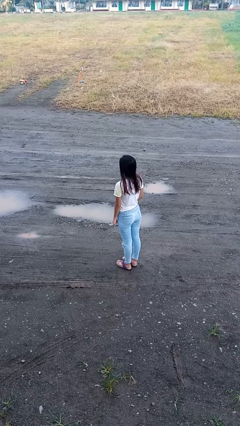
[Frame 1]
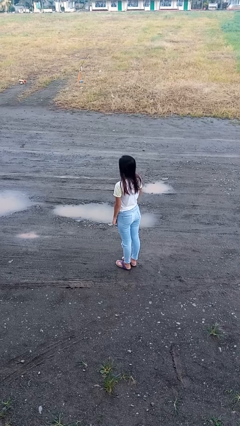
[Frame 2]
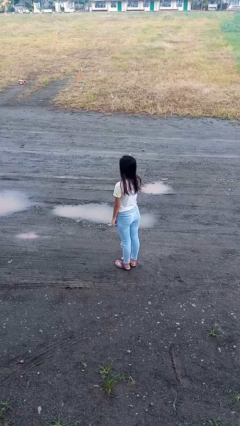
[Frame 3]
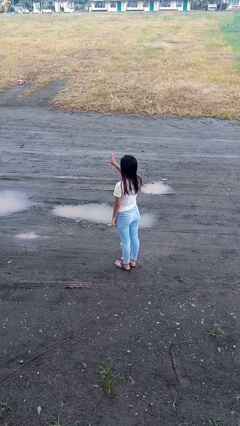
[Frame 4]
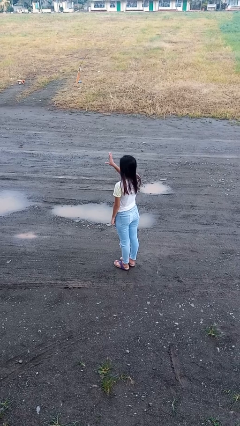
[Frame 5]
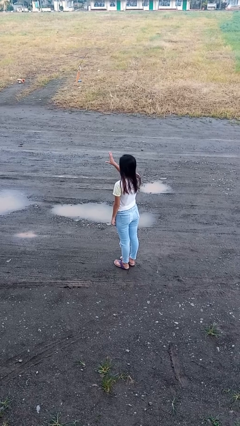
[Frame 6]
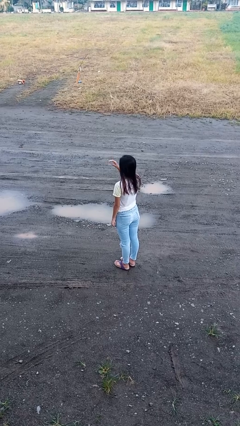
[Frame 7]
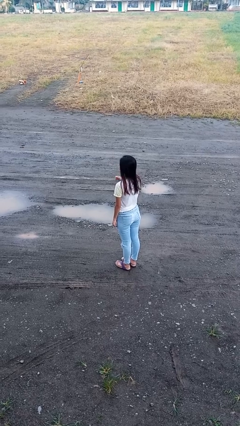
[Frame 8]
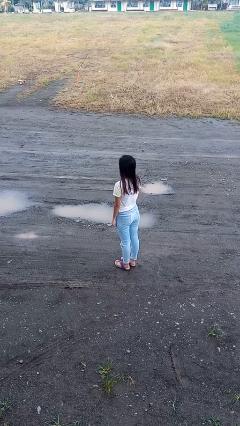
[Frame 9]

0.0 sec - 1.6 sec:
person gestures swipe left

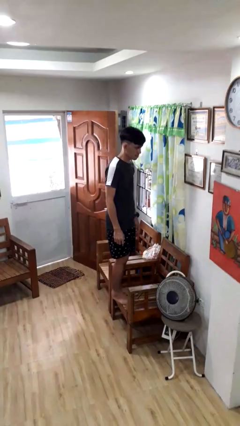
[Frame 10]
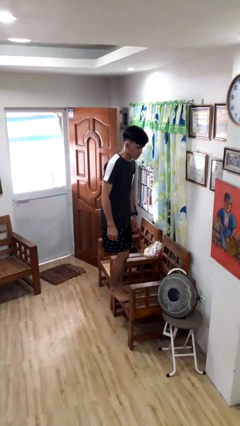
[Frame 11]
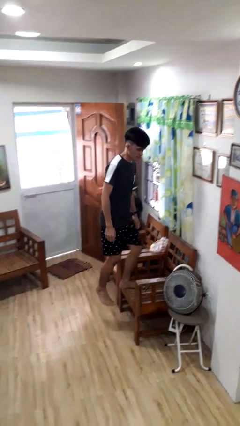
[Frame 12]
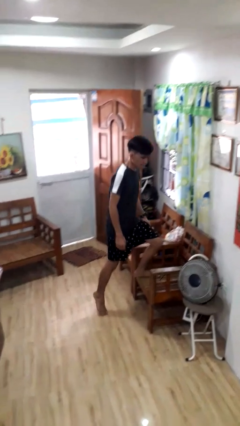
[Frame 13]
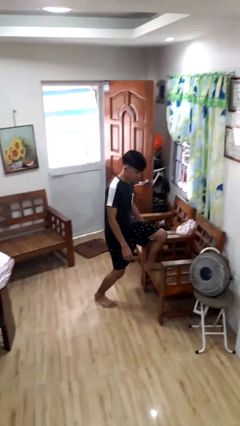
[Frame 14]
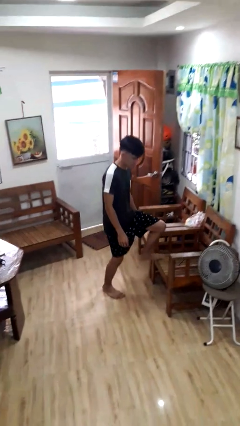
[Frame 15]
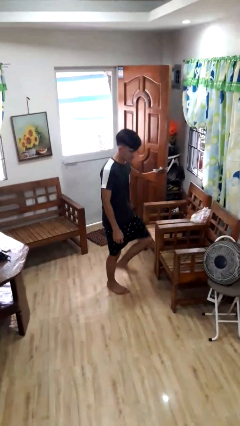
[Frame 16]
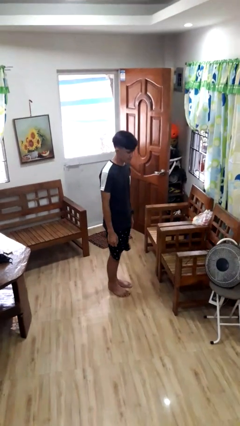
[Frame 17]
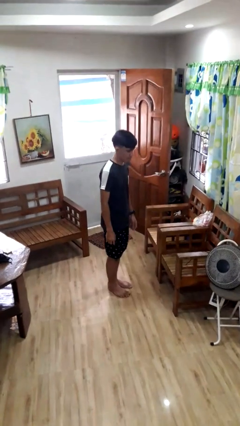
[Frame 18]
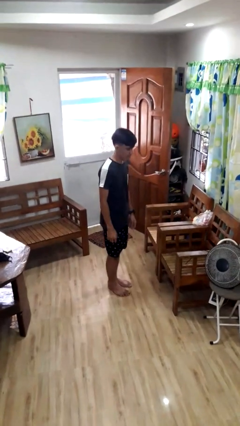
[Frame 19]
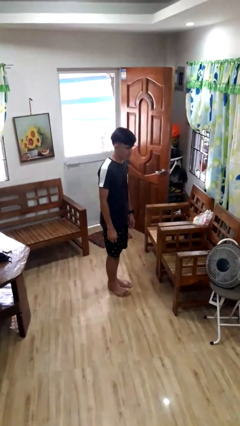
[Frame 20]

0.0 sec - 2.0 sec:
person climbs off chair

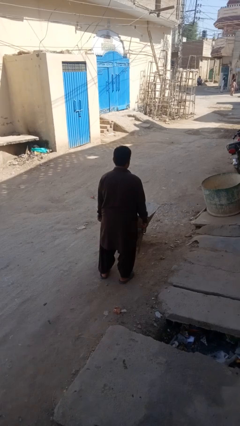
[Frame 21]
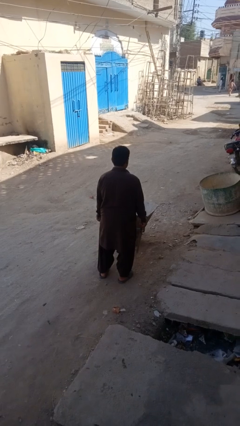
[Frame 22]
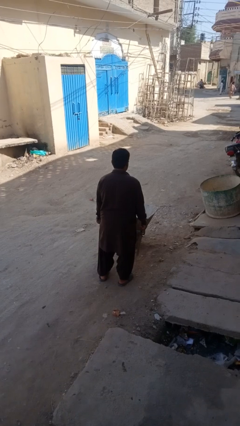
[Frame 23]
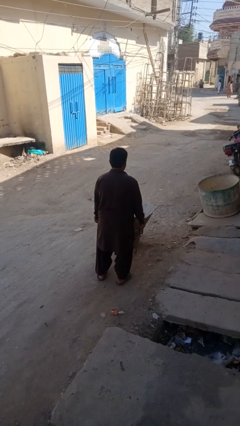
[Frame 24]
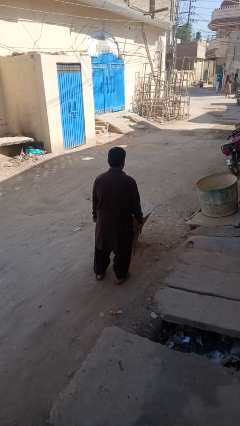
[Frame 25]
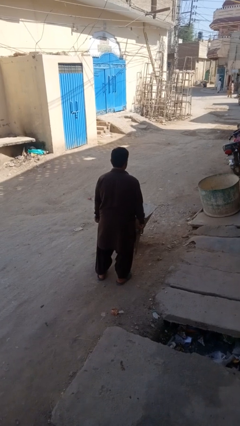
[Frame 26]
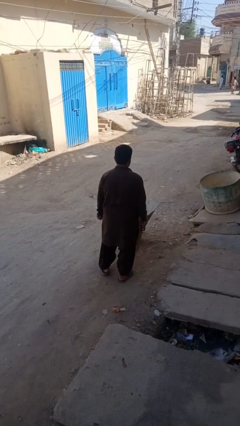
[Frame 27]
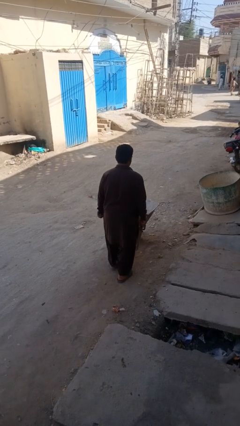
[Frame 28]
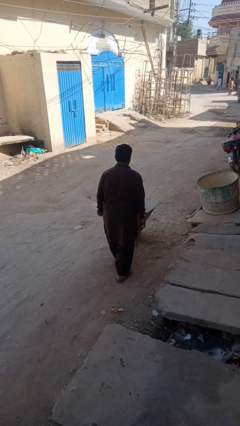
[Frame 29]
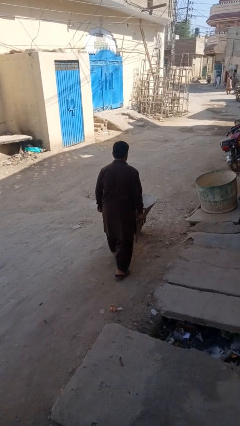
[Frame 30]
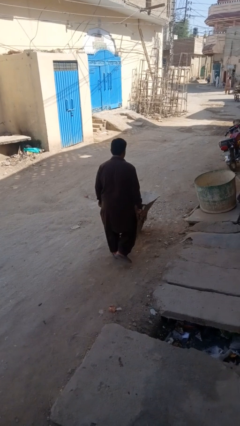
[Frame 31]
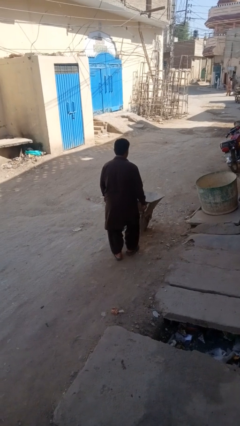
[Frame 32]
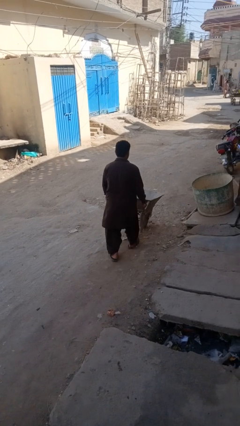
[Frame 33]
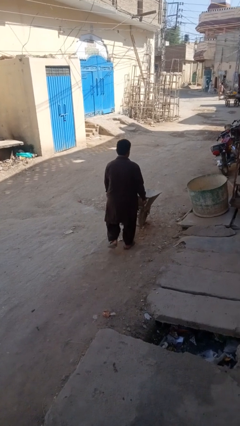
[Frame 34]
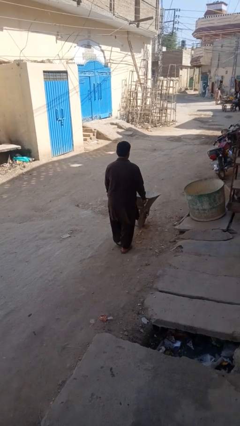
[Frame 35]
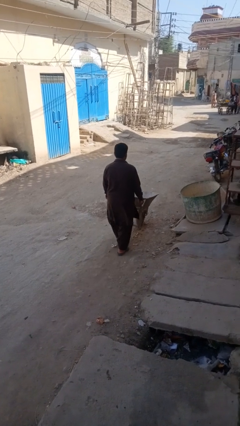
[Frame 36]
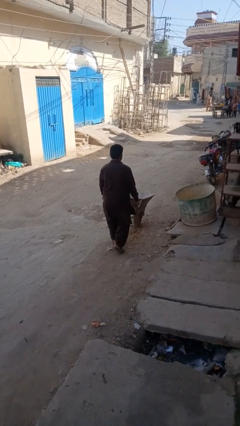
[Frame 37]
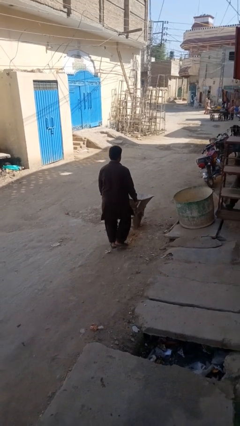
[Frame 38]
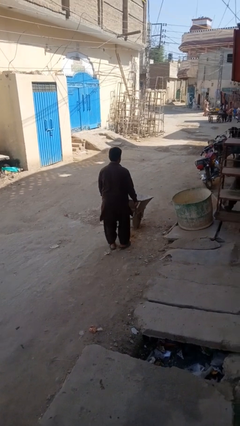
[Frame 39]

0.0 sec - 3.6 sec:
person pushes wheeled trashcan

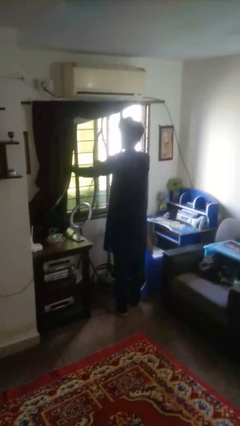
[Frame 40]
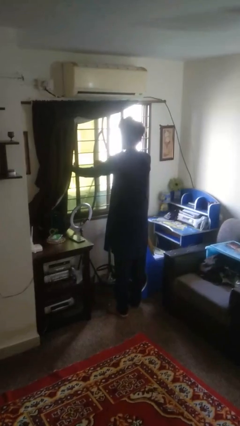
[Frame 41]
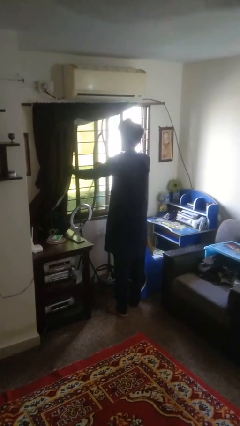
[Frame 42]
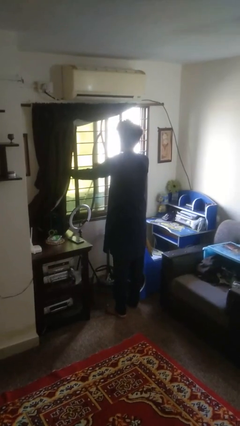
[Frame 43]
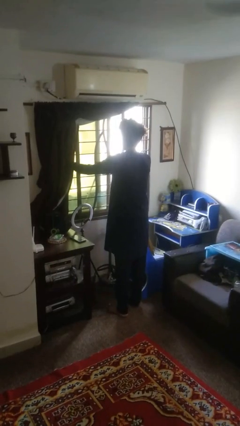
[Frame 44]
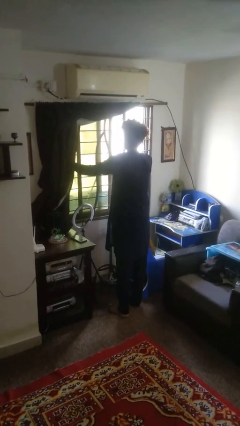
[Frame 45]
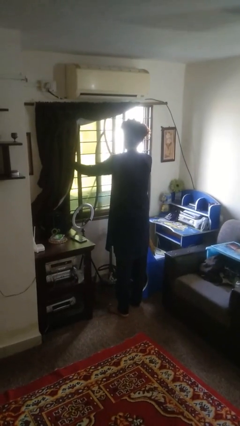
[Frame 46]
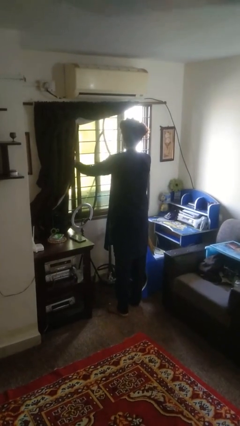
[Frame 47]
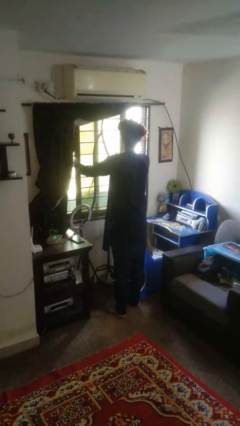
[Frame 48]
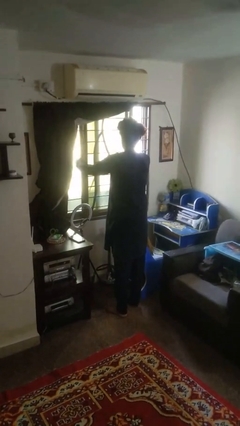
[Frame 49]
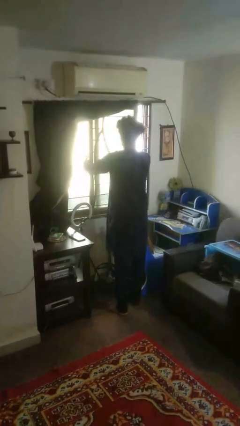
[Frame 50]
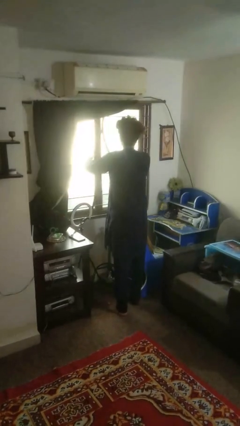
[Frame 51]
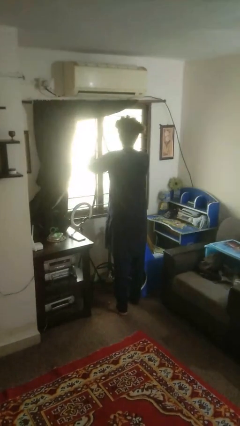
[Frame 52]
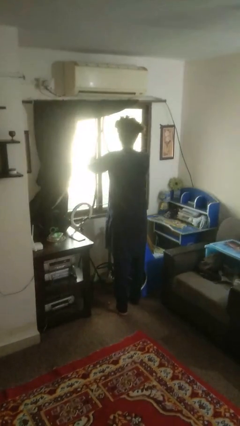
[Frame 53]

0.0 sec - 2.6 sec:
person closes home window

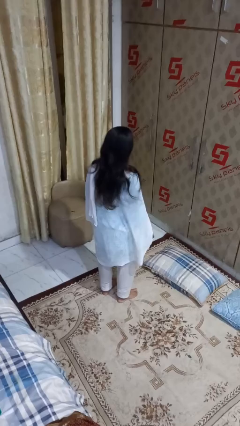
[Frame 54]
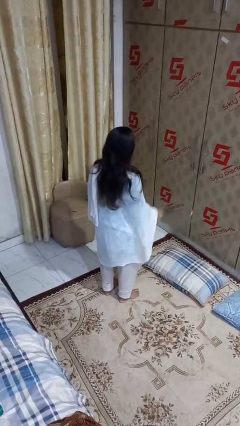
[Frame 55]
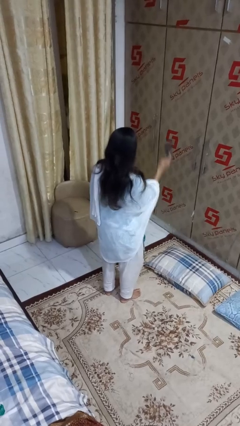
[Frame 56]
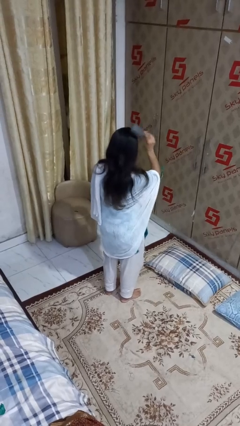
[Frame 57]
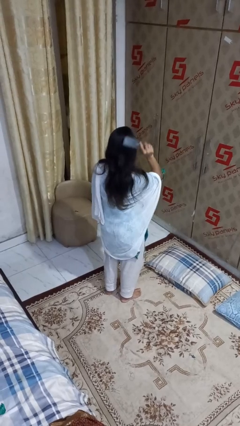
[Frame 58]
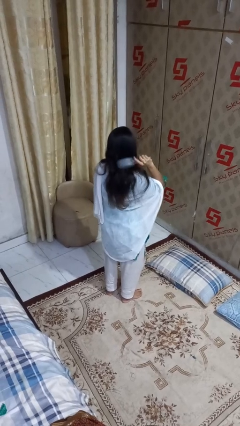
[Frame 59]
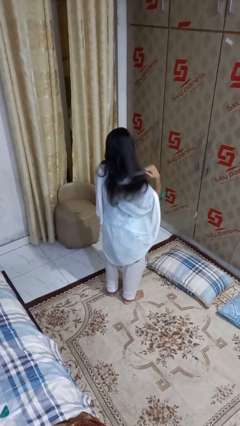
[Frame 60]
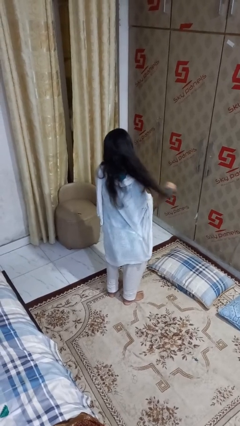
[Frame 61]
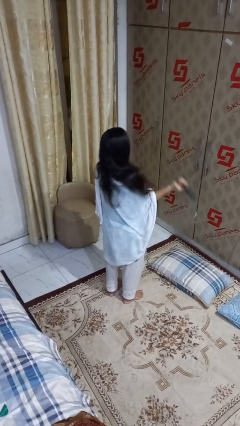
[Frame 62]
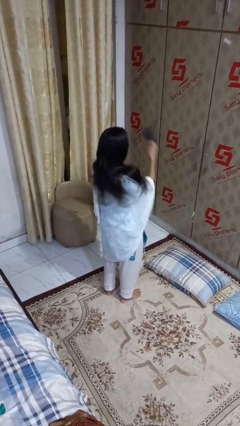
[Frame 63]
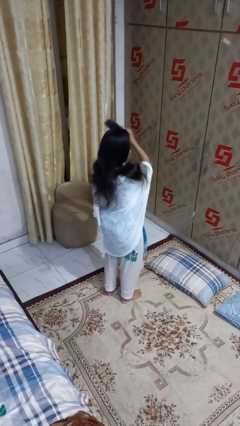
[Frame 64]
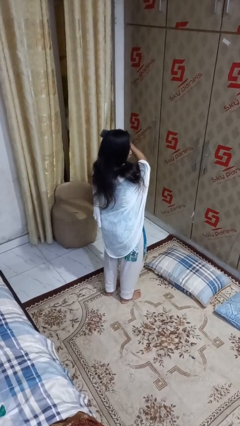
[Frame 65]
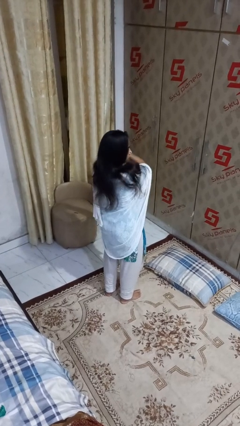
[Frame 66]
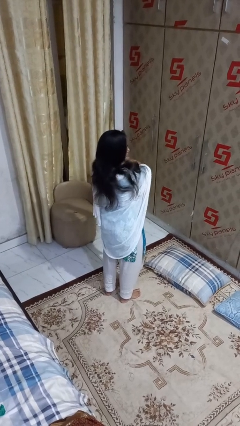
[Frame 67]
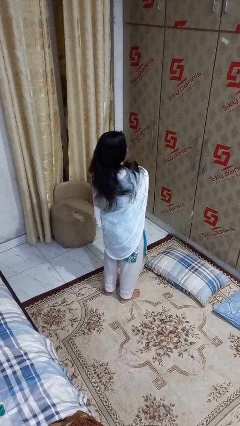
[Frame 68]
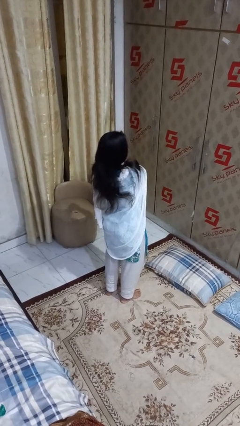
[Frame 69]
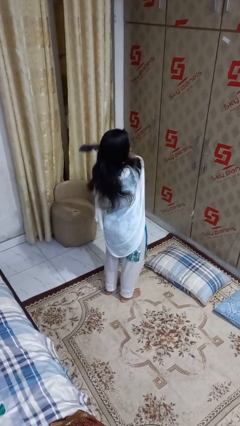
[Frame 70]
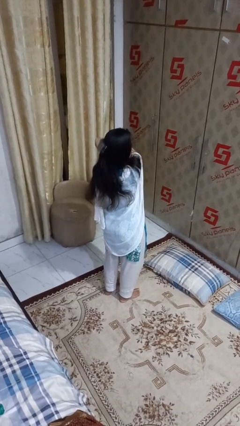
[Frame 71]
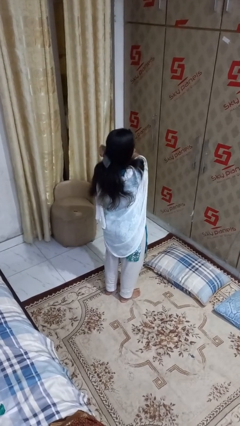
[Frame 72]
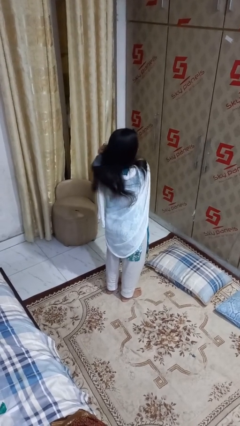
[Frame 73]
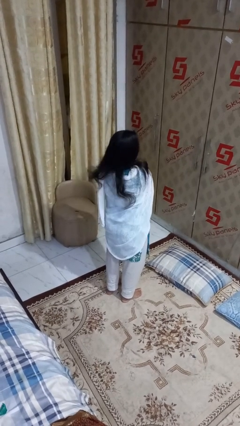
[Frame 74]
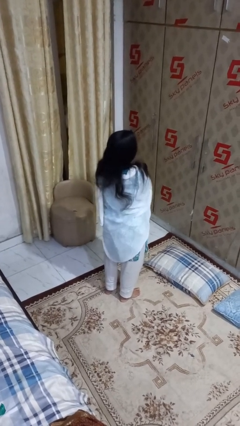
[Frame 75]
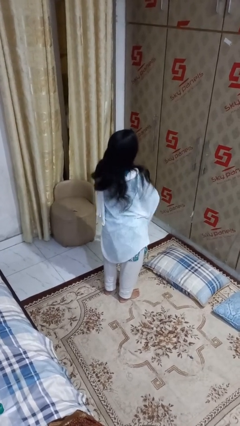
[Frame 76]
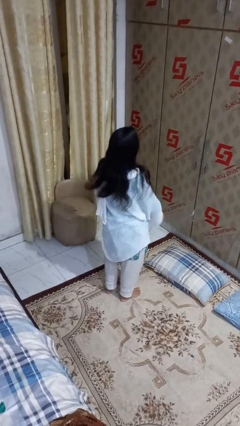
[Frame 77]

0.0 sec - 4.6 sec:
person brushes hair

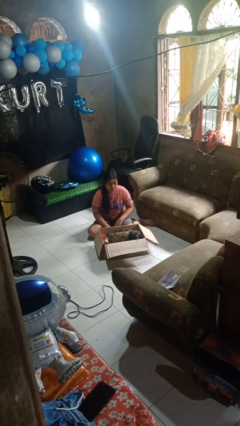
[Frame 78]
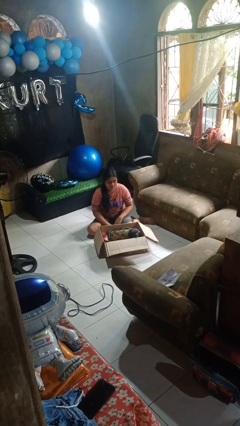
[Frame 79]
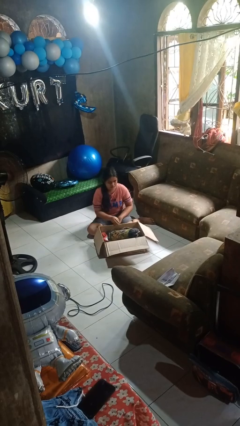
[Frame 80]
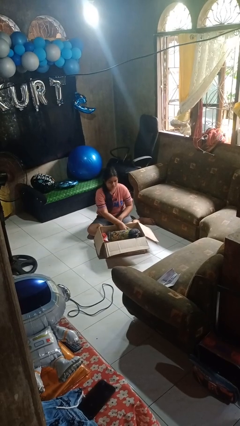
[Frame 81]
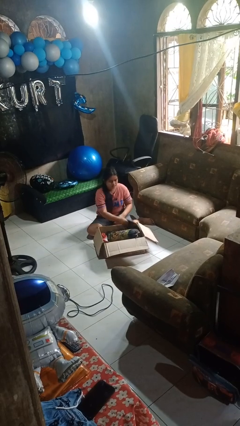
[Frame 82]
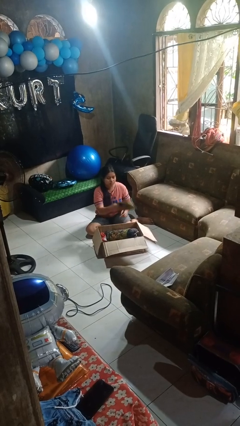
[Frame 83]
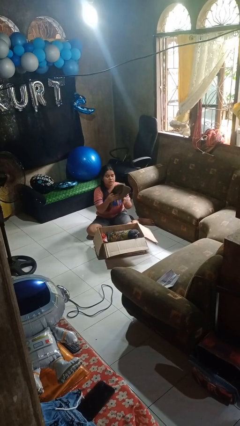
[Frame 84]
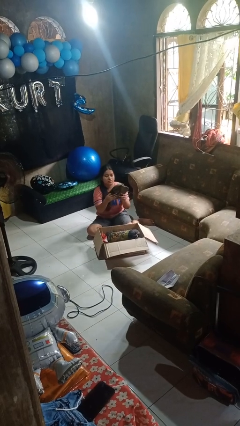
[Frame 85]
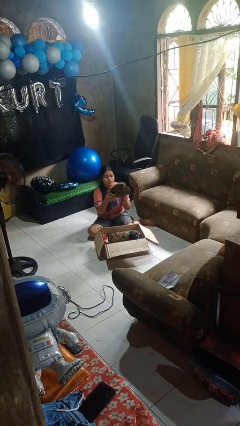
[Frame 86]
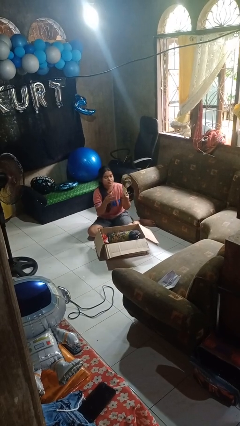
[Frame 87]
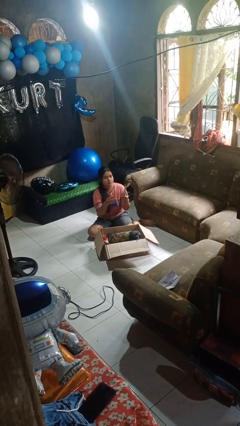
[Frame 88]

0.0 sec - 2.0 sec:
person takes object from box

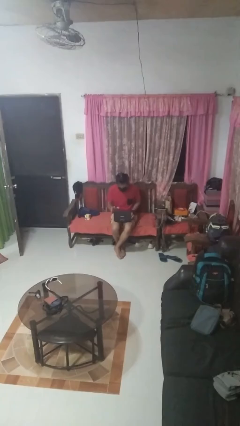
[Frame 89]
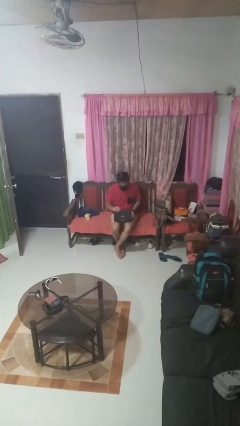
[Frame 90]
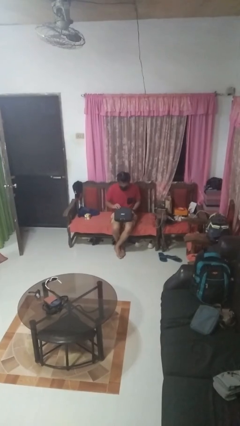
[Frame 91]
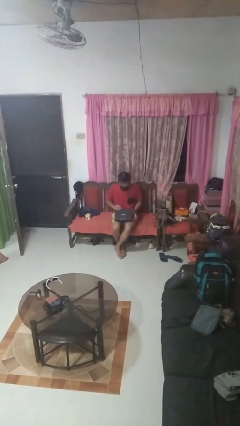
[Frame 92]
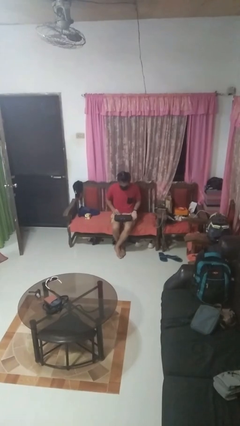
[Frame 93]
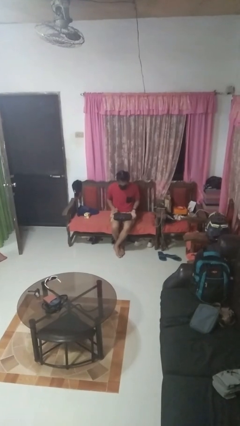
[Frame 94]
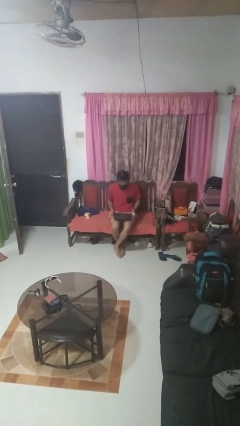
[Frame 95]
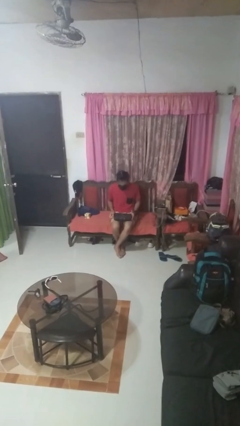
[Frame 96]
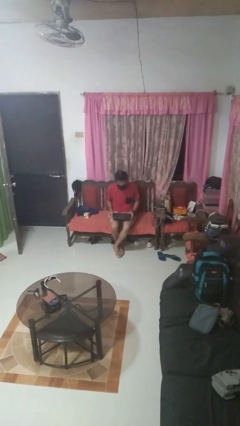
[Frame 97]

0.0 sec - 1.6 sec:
person closes laptop
